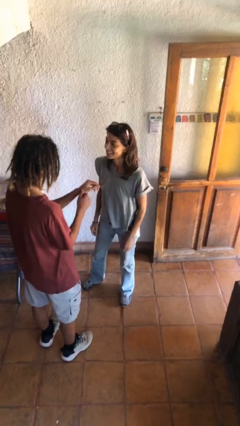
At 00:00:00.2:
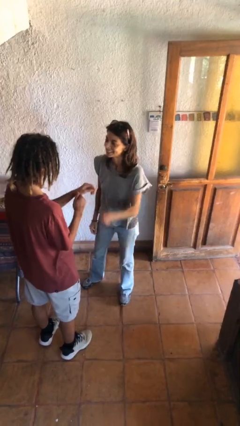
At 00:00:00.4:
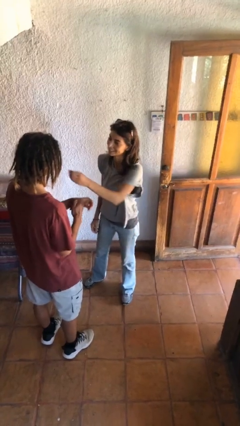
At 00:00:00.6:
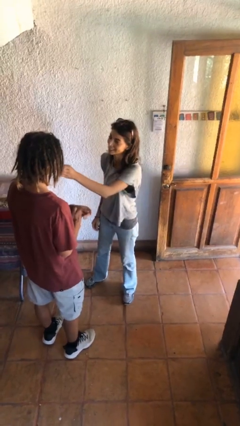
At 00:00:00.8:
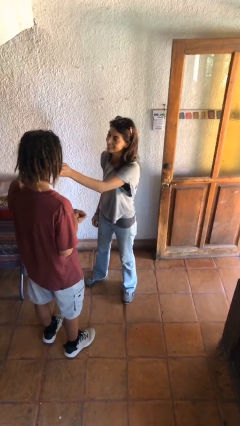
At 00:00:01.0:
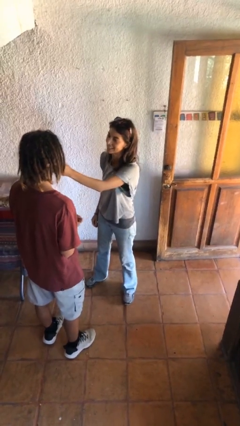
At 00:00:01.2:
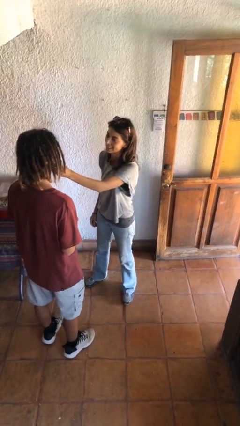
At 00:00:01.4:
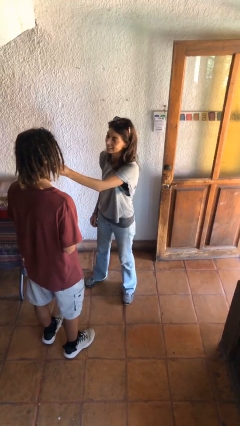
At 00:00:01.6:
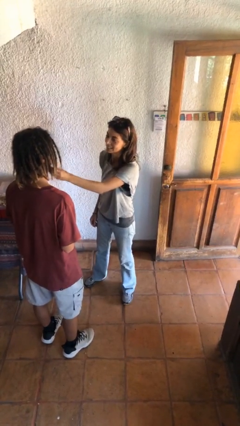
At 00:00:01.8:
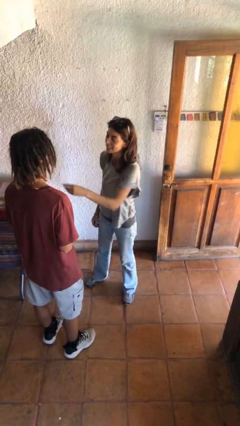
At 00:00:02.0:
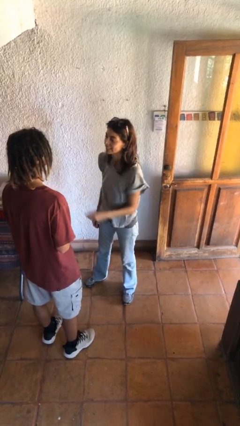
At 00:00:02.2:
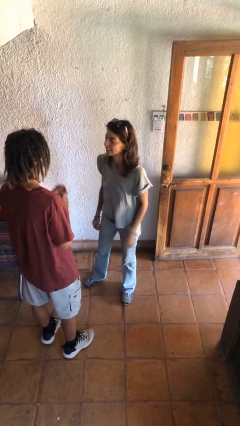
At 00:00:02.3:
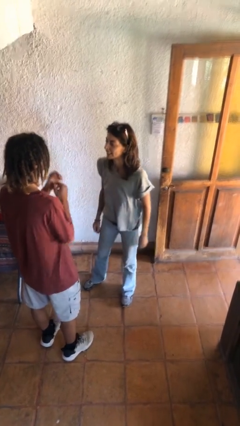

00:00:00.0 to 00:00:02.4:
person touches face of person

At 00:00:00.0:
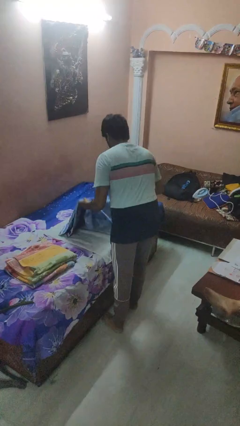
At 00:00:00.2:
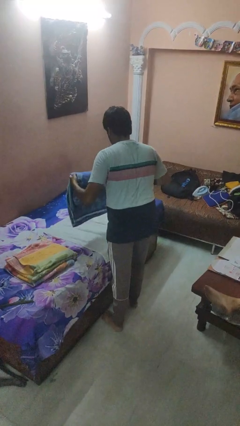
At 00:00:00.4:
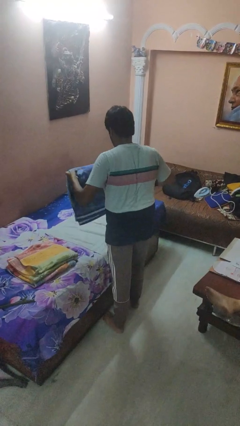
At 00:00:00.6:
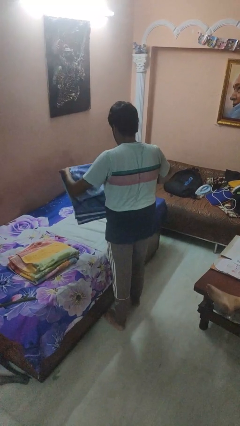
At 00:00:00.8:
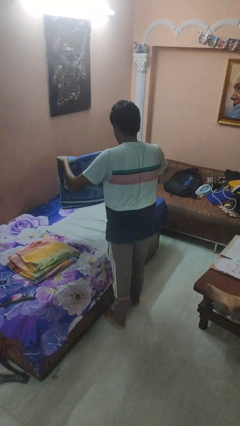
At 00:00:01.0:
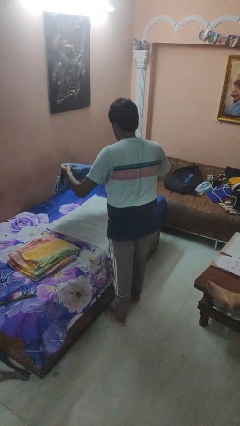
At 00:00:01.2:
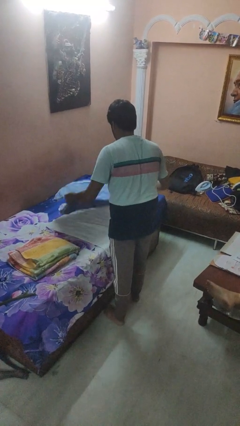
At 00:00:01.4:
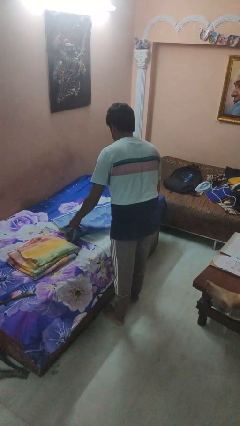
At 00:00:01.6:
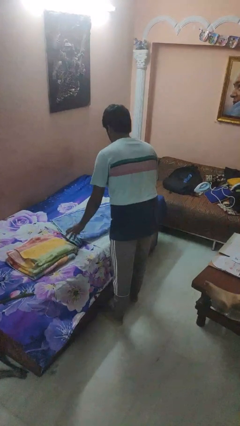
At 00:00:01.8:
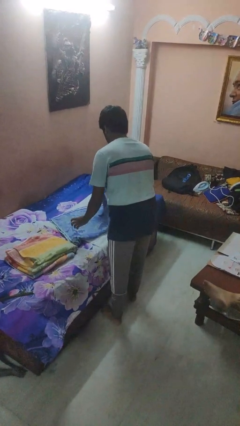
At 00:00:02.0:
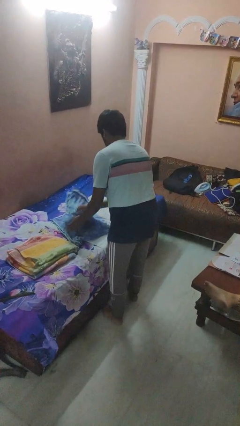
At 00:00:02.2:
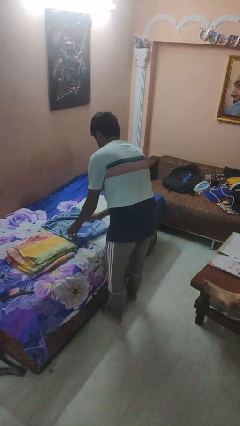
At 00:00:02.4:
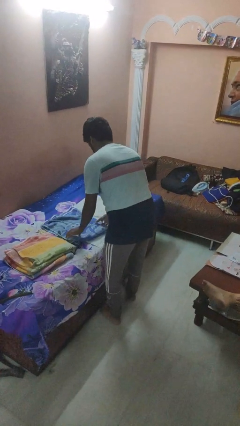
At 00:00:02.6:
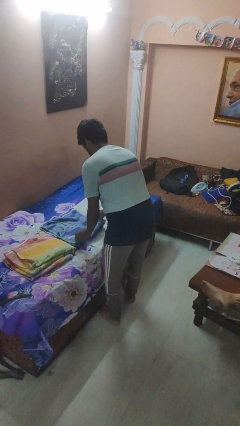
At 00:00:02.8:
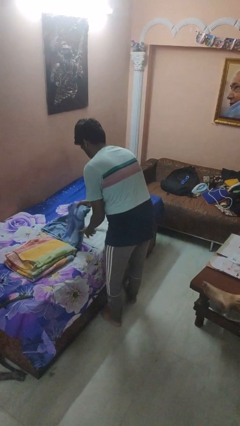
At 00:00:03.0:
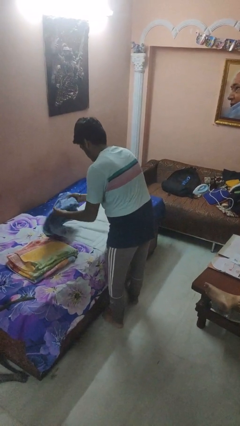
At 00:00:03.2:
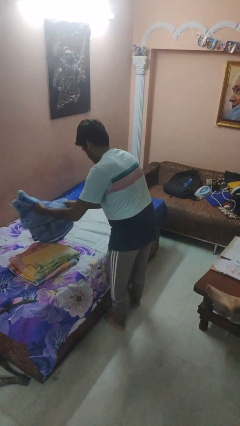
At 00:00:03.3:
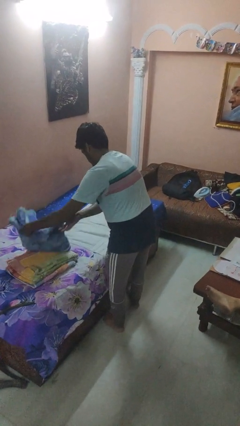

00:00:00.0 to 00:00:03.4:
person folds towel

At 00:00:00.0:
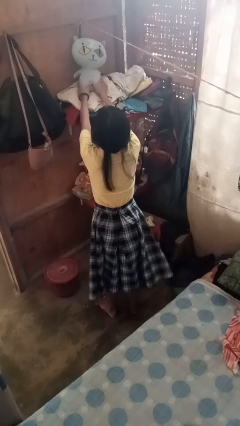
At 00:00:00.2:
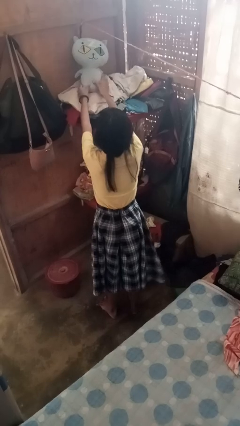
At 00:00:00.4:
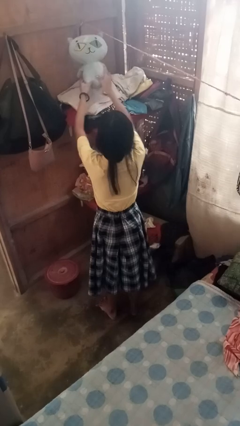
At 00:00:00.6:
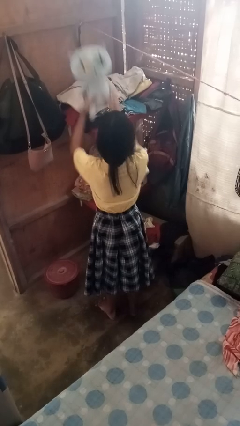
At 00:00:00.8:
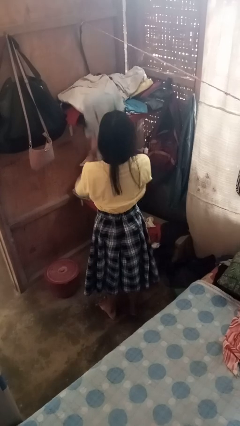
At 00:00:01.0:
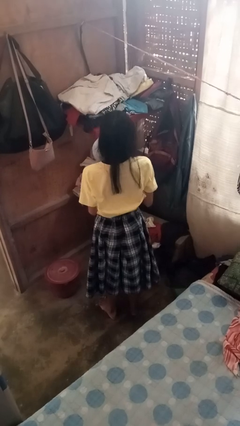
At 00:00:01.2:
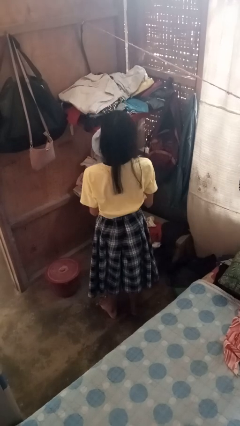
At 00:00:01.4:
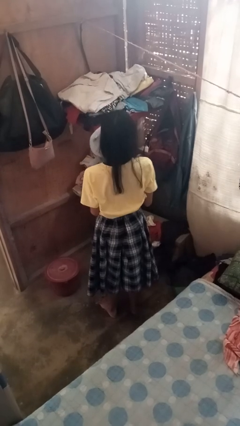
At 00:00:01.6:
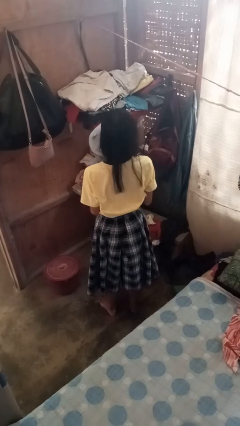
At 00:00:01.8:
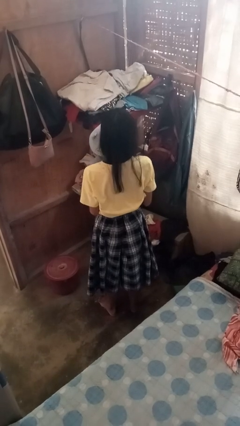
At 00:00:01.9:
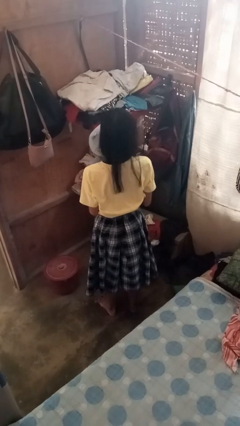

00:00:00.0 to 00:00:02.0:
person picks up object from shelf

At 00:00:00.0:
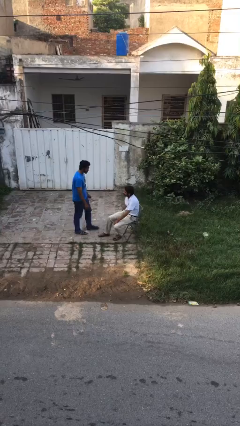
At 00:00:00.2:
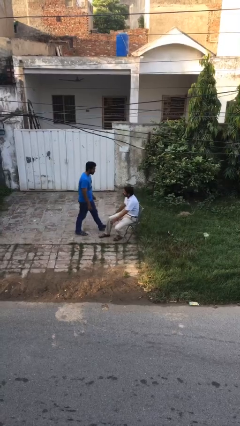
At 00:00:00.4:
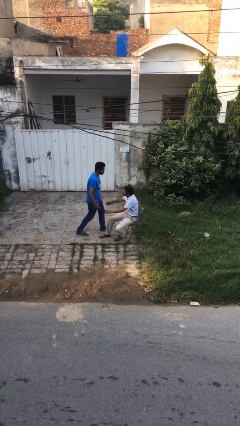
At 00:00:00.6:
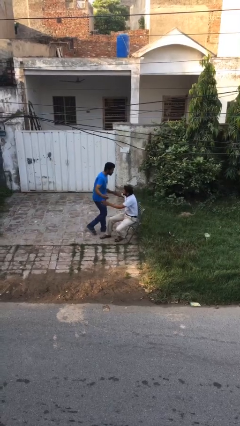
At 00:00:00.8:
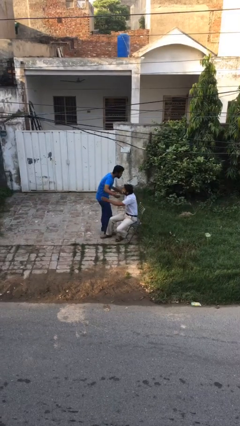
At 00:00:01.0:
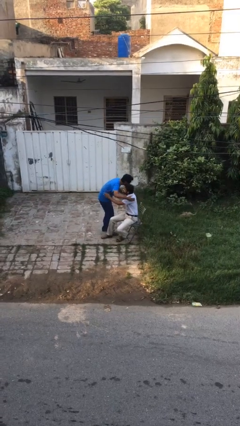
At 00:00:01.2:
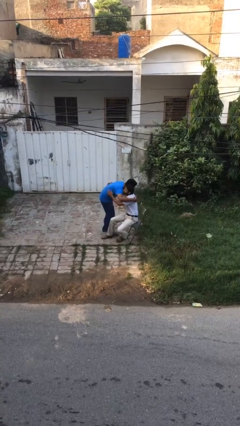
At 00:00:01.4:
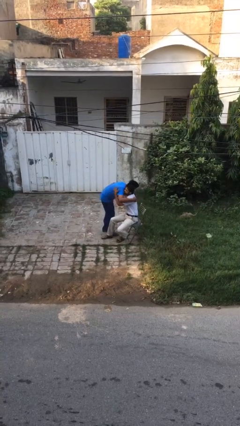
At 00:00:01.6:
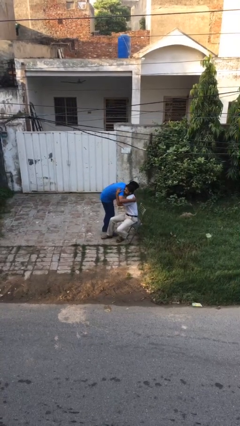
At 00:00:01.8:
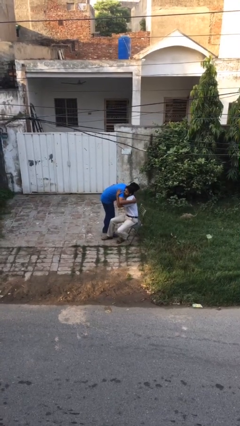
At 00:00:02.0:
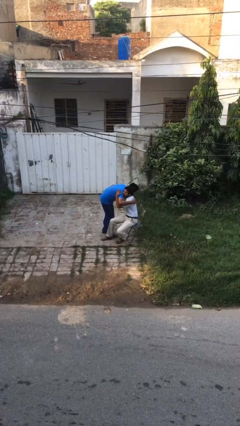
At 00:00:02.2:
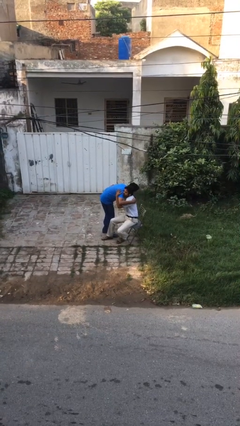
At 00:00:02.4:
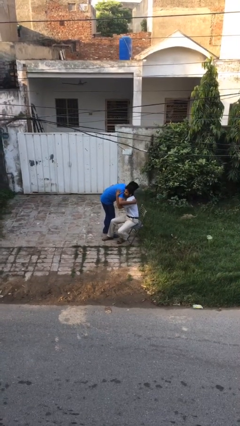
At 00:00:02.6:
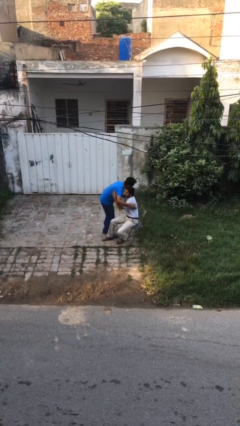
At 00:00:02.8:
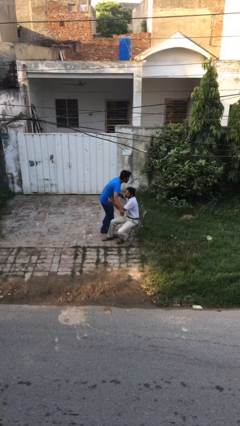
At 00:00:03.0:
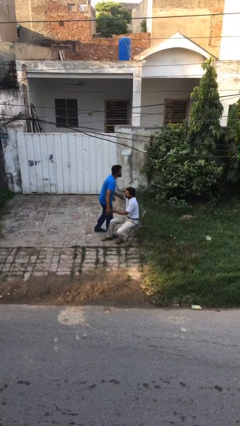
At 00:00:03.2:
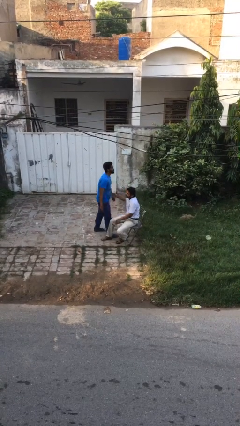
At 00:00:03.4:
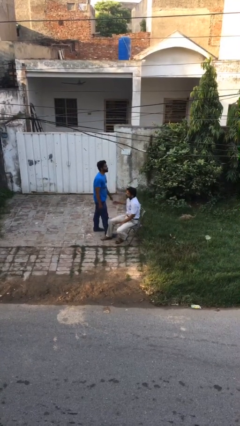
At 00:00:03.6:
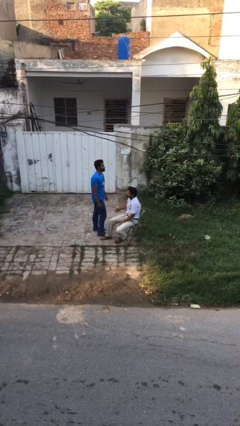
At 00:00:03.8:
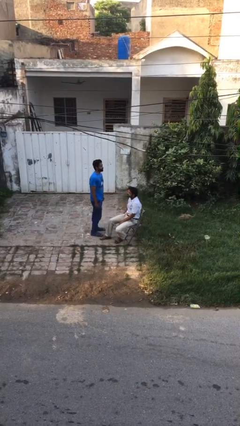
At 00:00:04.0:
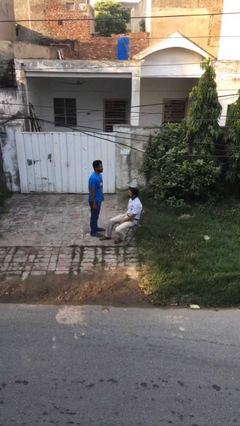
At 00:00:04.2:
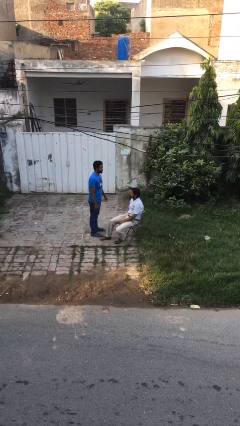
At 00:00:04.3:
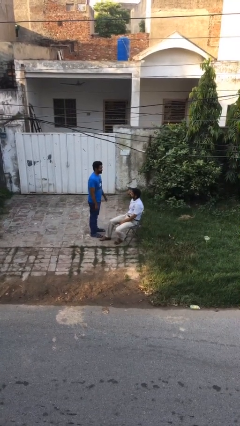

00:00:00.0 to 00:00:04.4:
person embraces person

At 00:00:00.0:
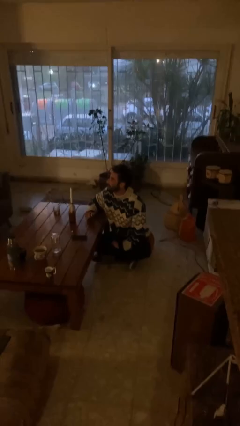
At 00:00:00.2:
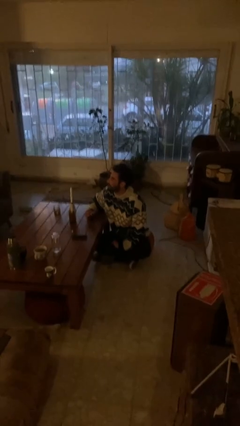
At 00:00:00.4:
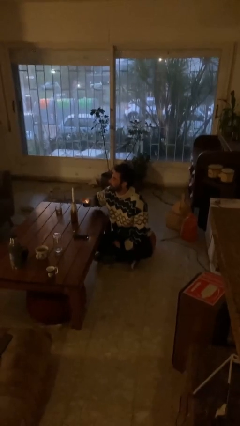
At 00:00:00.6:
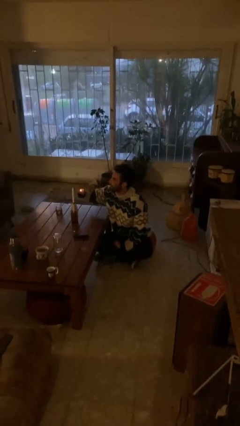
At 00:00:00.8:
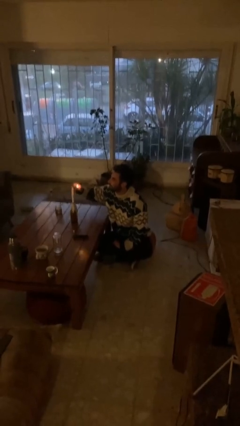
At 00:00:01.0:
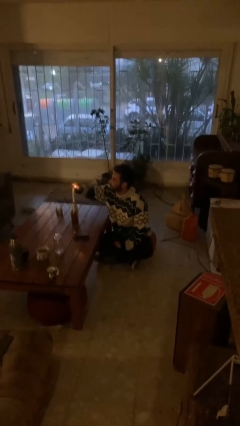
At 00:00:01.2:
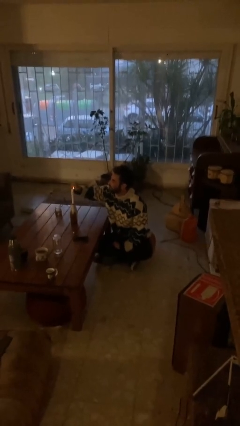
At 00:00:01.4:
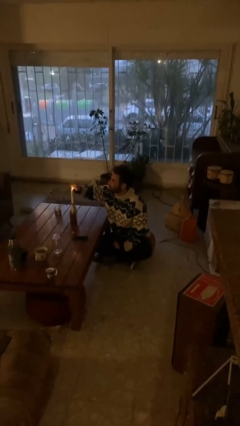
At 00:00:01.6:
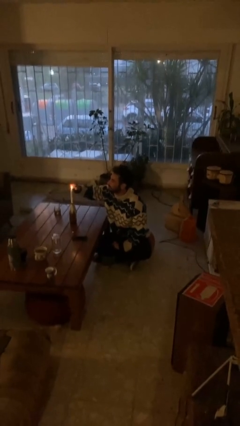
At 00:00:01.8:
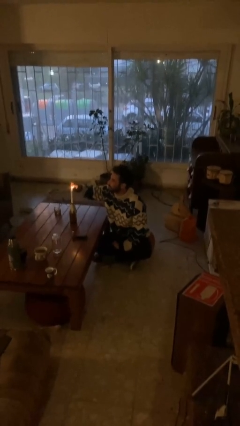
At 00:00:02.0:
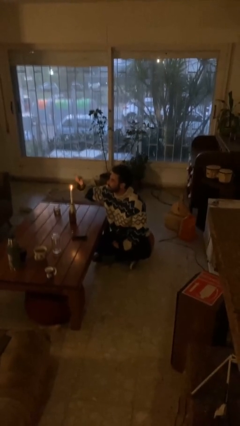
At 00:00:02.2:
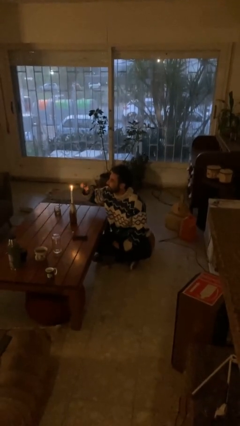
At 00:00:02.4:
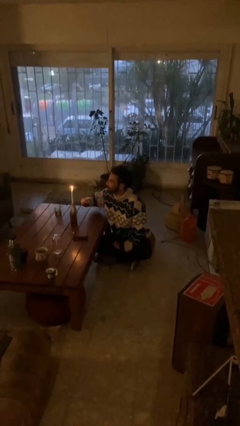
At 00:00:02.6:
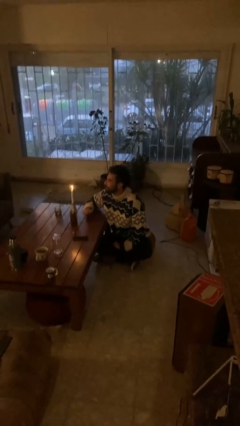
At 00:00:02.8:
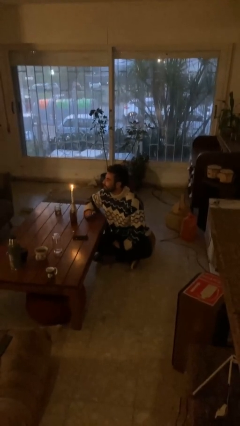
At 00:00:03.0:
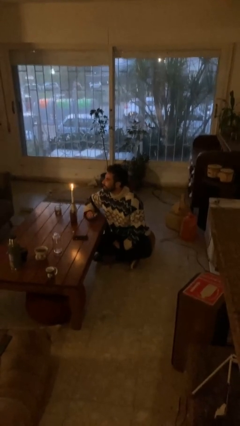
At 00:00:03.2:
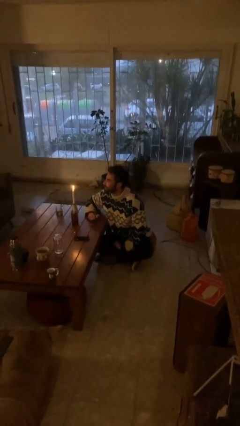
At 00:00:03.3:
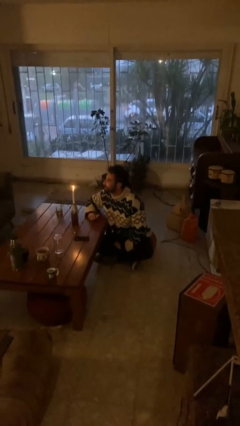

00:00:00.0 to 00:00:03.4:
person lights candle
